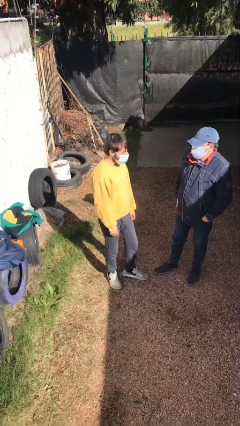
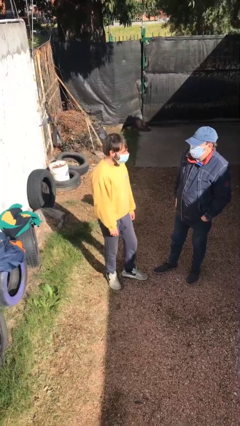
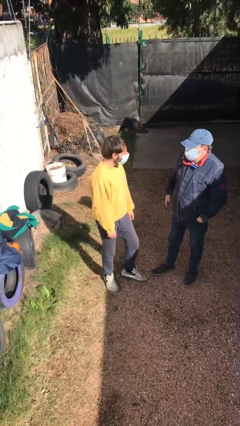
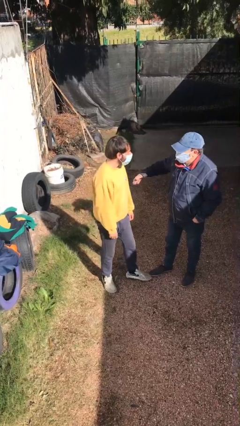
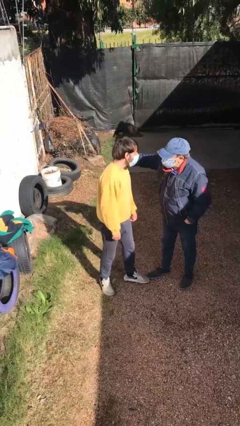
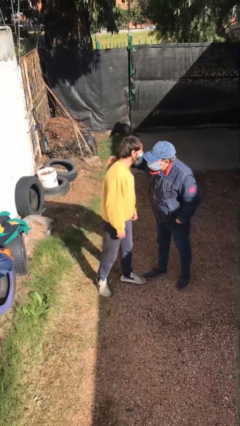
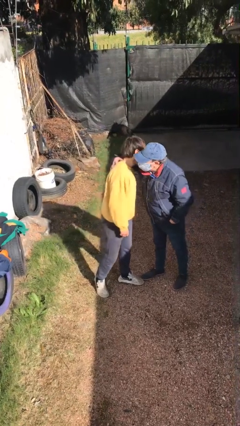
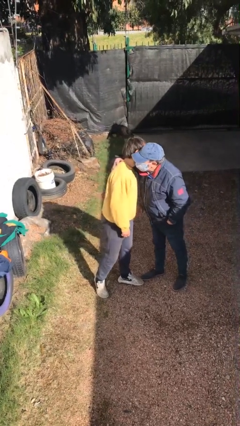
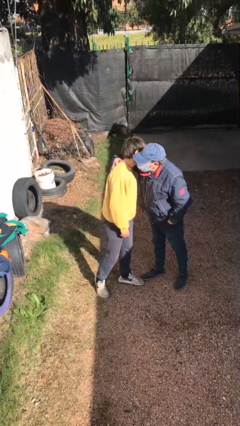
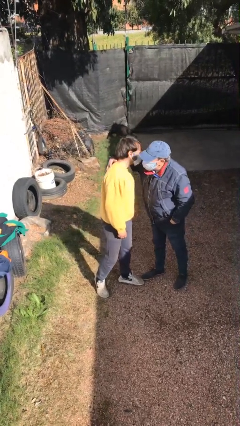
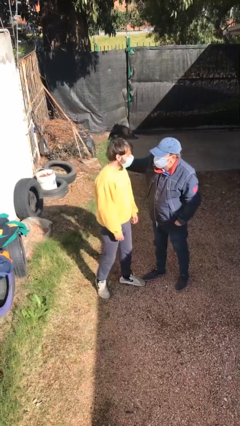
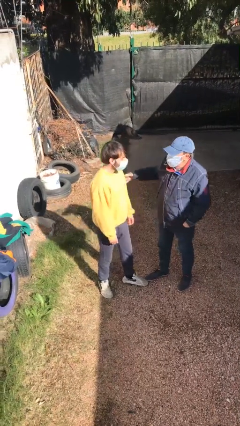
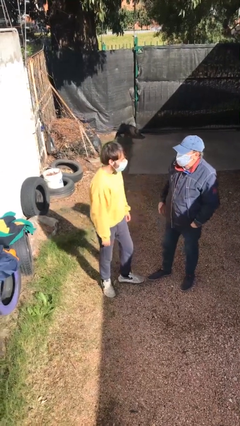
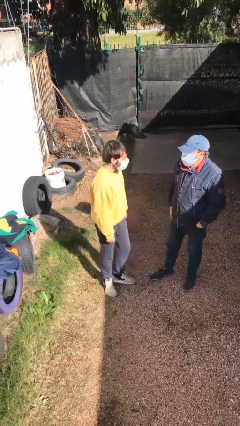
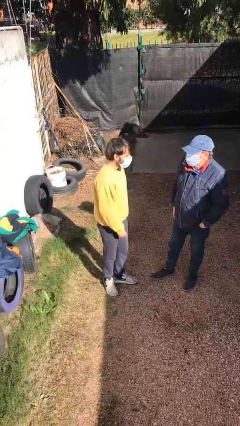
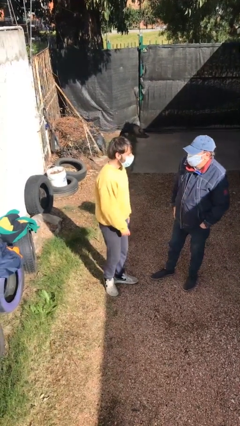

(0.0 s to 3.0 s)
person kisses cheek of person

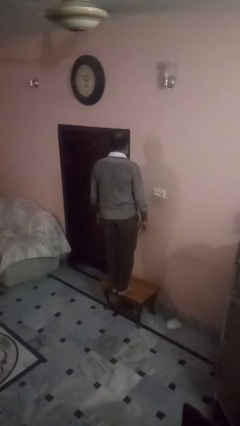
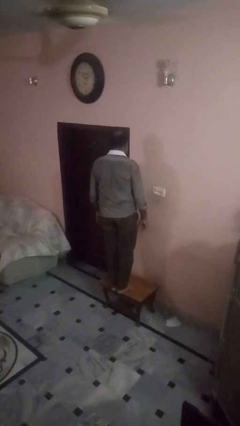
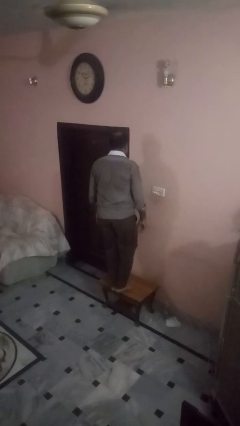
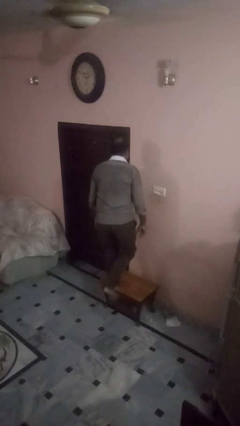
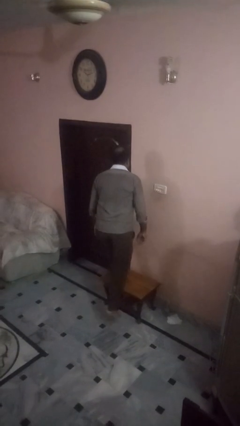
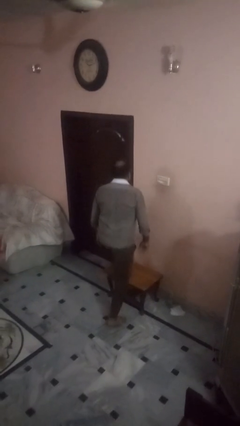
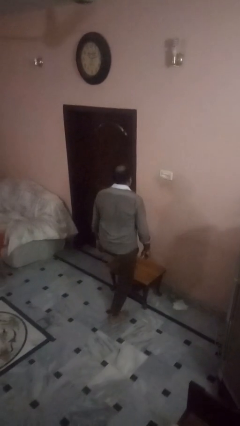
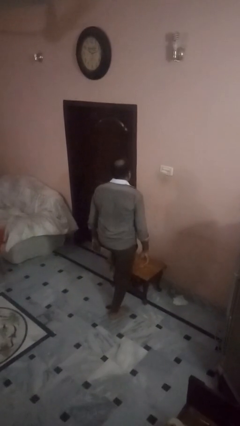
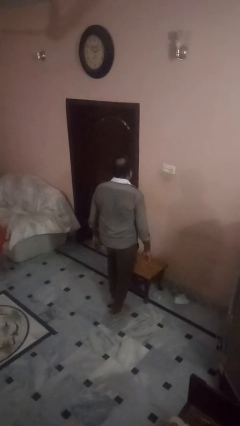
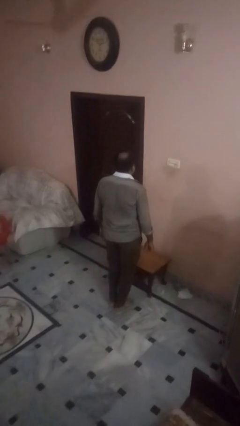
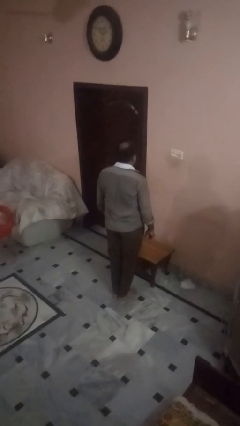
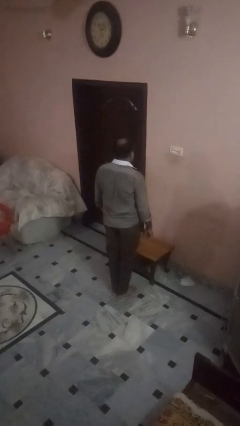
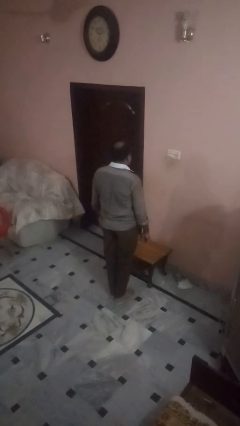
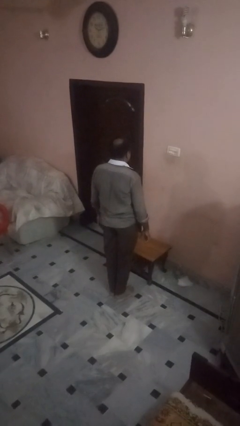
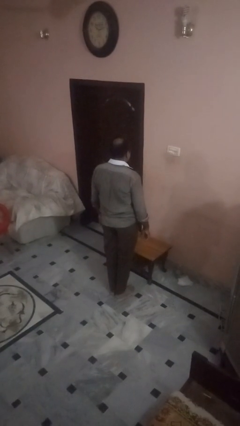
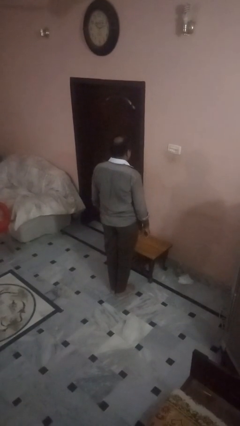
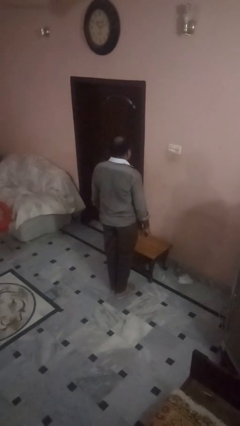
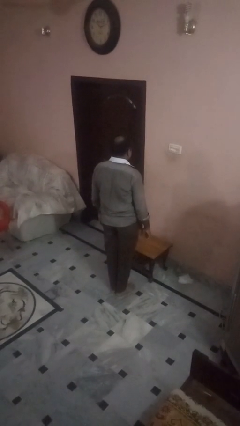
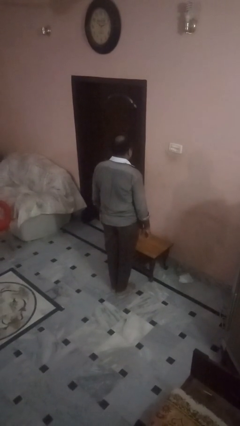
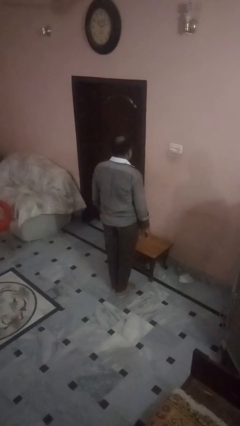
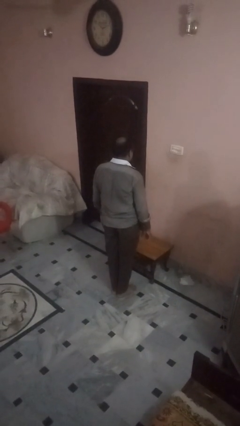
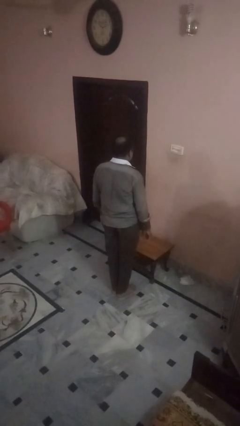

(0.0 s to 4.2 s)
person climbs off table

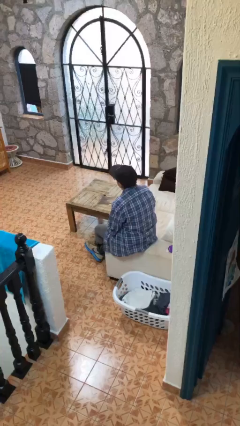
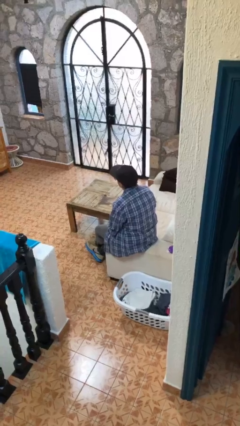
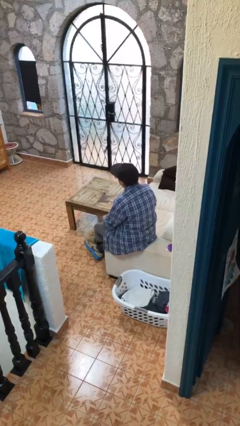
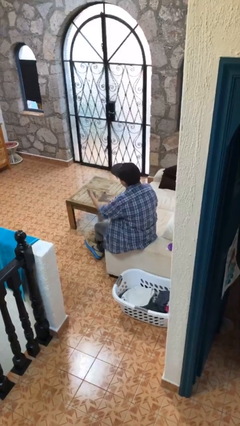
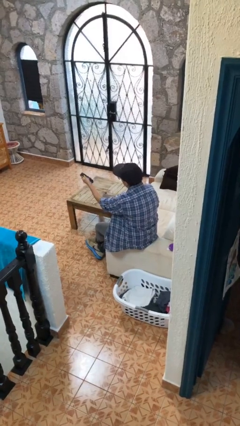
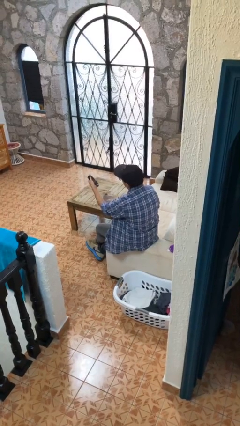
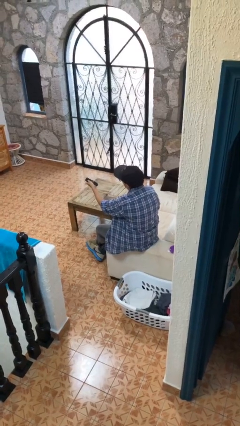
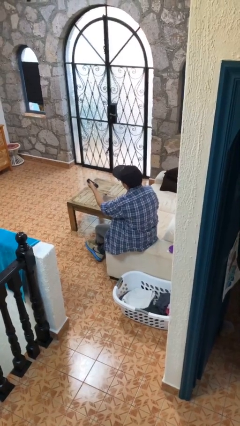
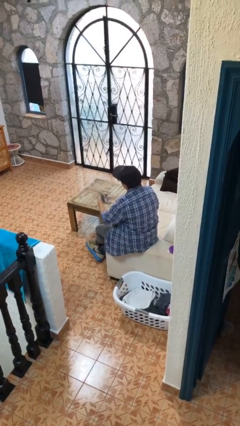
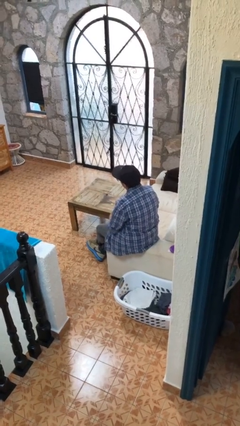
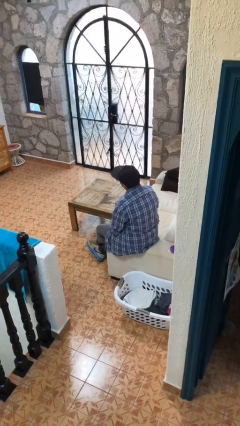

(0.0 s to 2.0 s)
person uses television remote

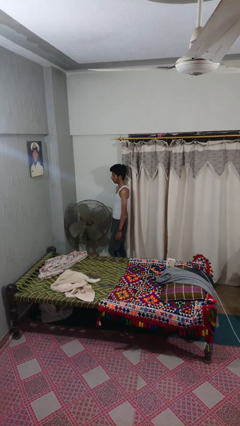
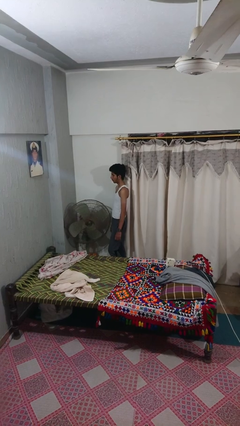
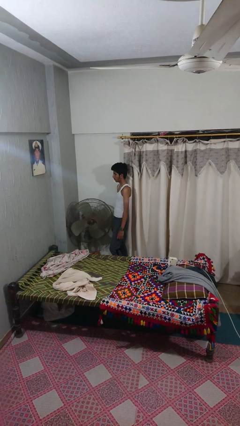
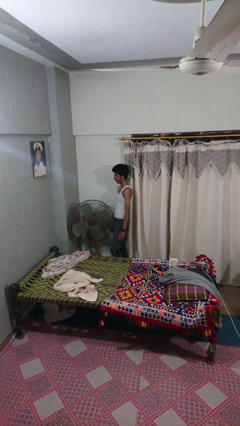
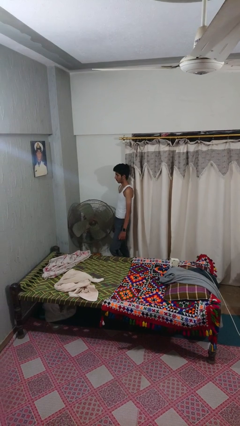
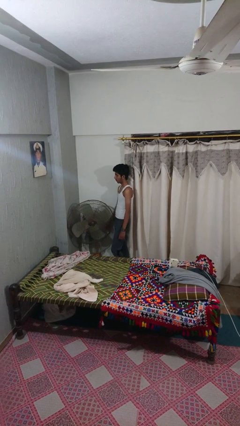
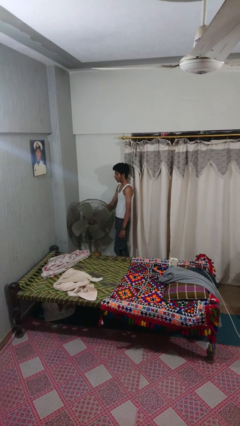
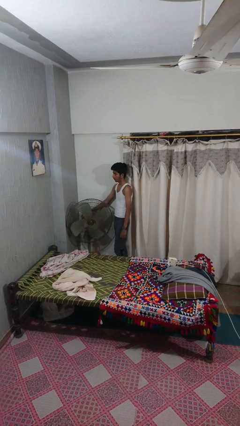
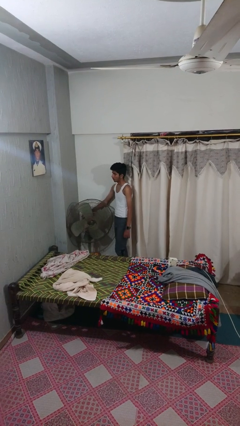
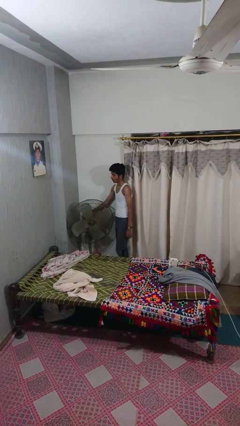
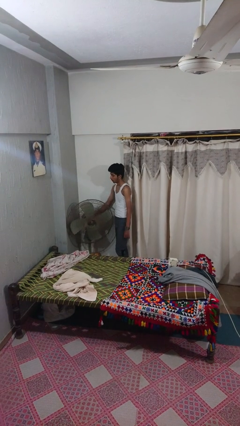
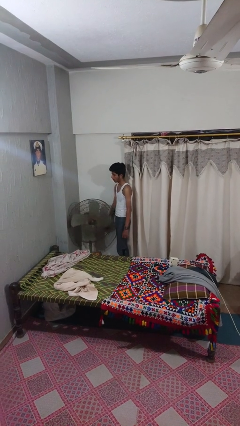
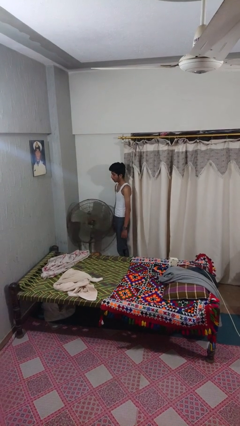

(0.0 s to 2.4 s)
person turns on fan

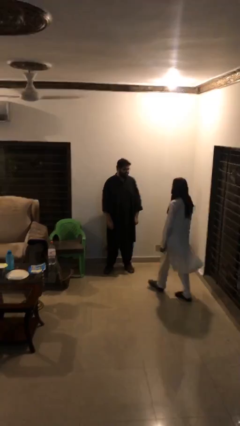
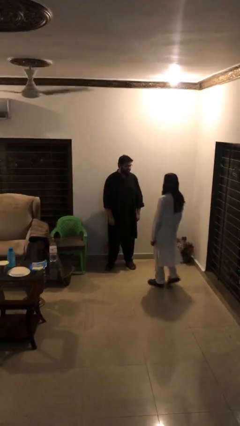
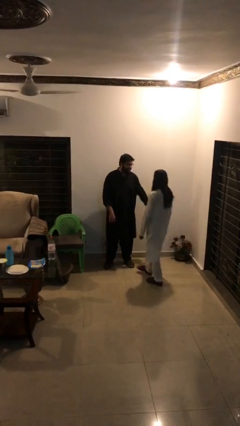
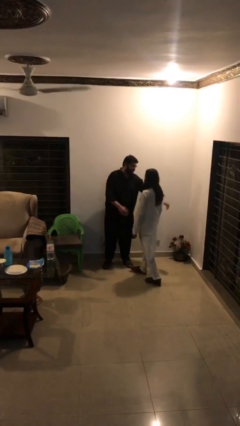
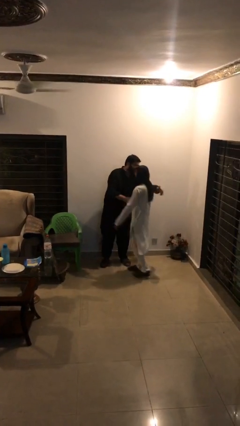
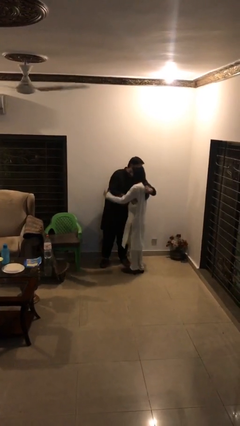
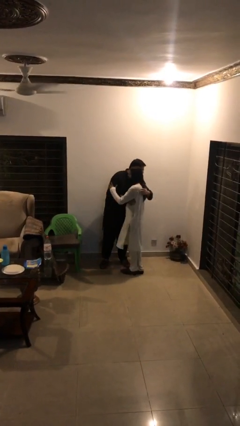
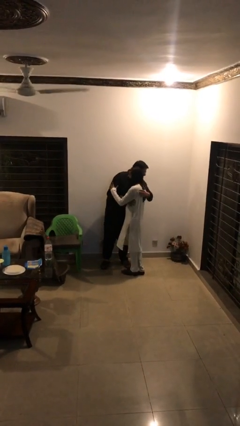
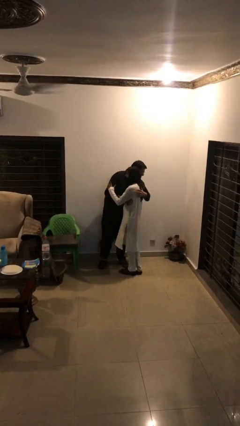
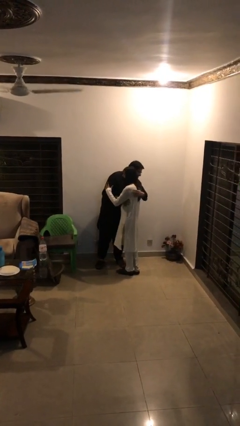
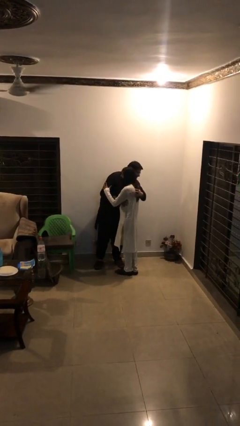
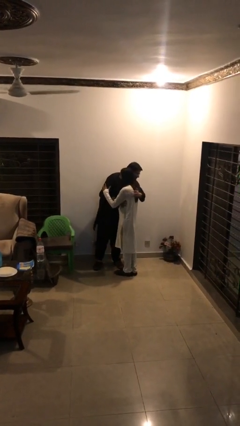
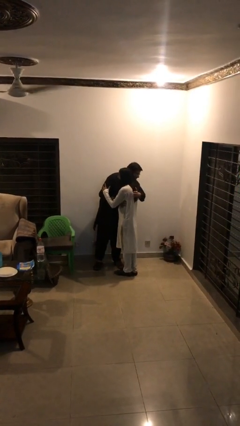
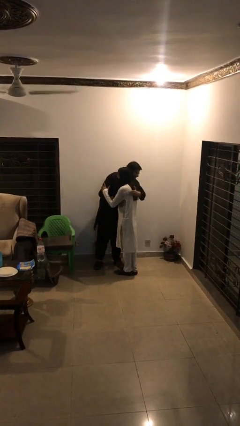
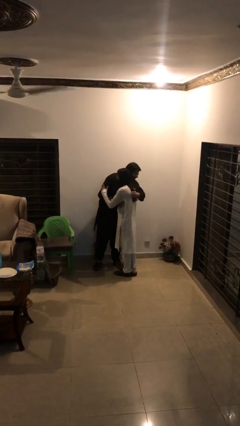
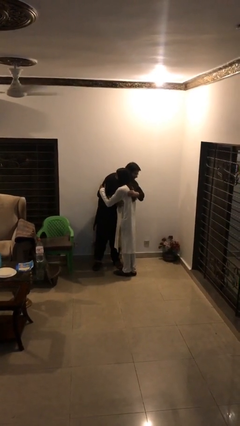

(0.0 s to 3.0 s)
person embraces person

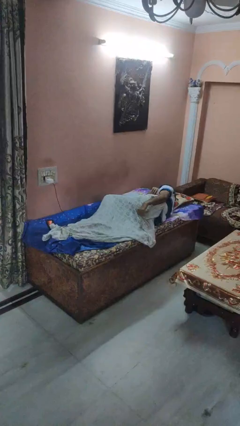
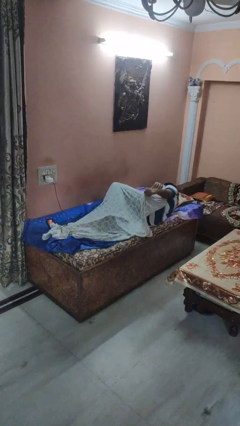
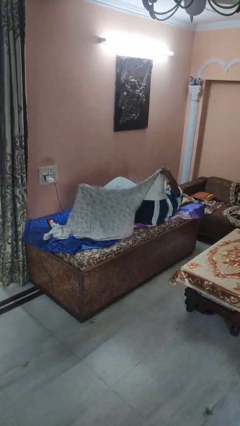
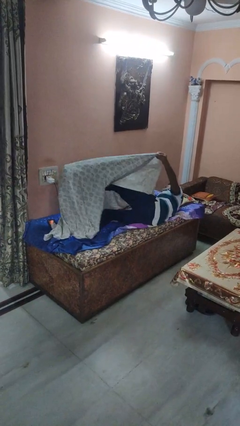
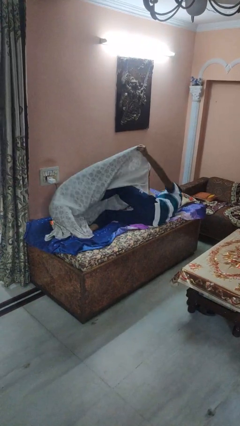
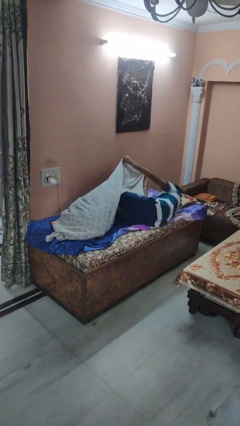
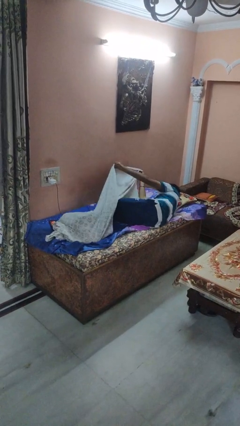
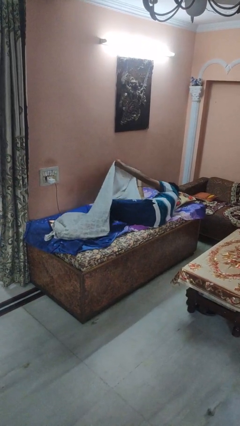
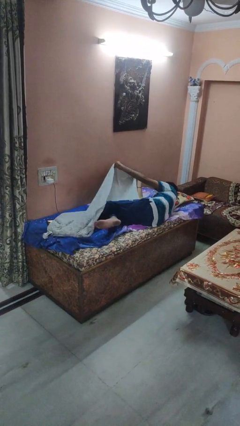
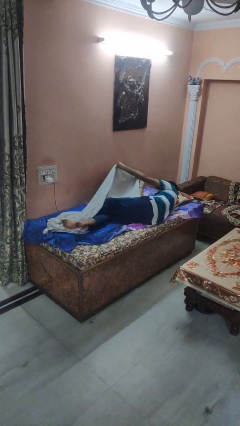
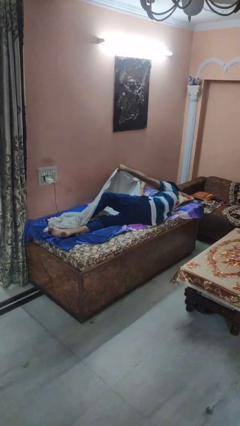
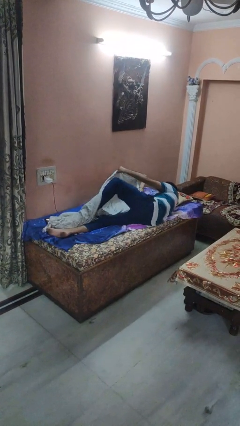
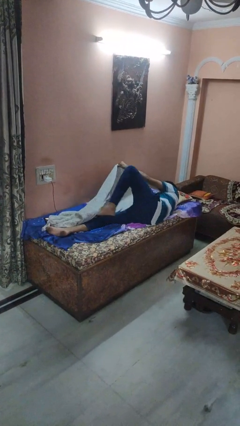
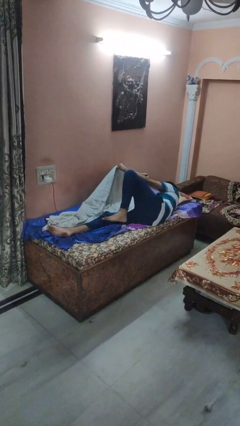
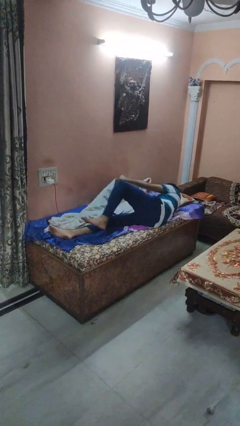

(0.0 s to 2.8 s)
person uncovers with bedsheets
